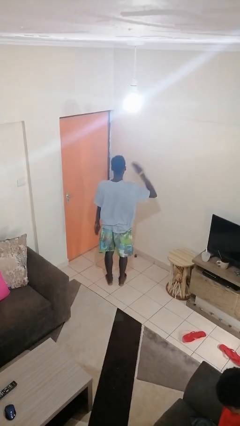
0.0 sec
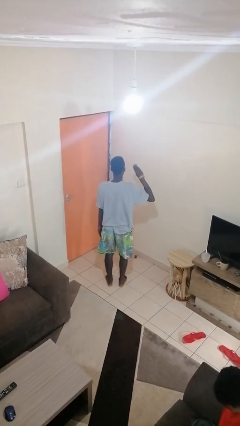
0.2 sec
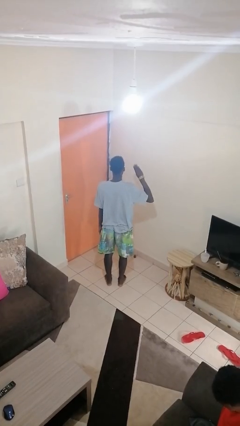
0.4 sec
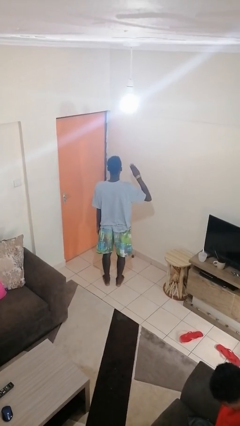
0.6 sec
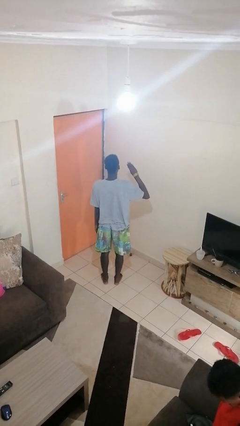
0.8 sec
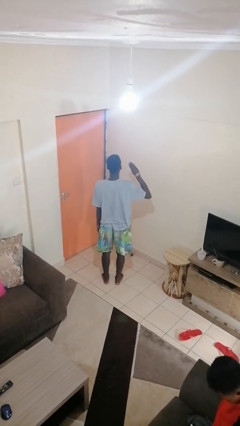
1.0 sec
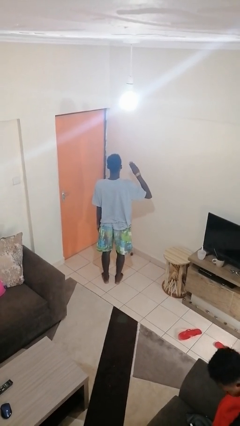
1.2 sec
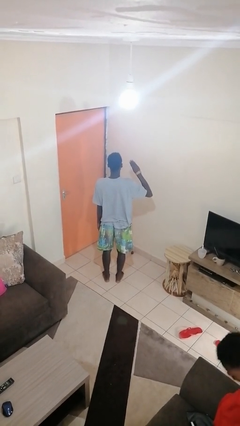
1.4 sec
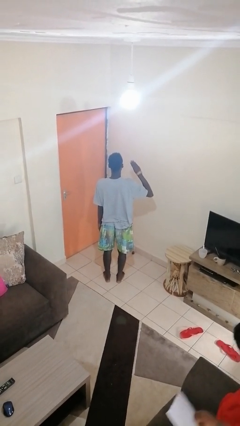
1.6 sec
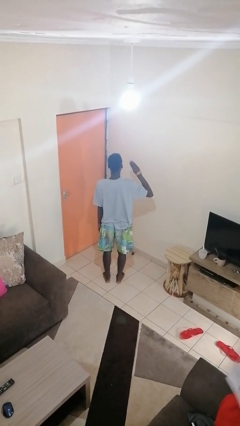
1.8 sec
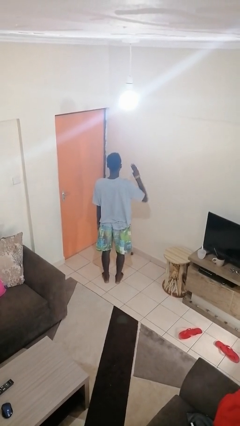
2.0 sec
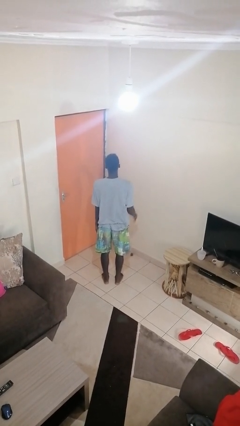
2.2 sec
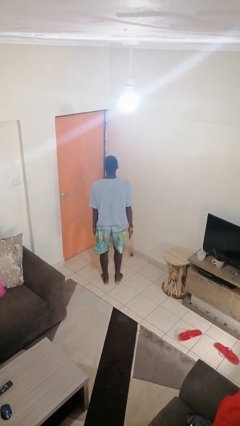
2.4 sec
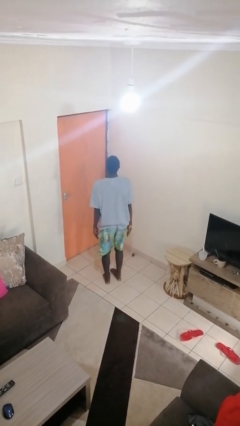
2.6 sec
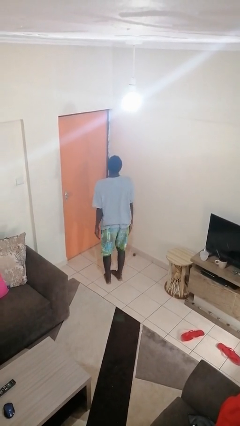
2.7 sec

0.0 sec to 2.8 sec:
person salutes

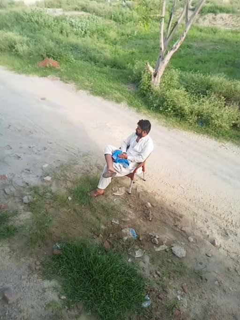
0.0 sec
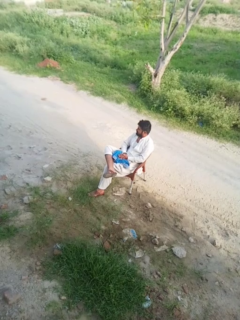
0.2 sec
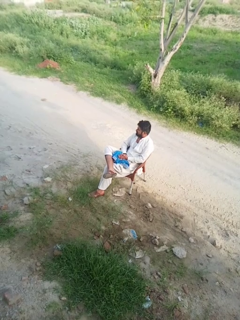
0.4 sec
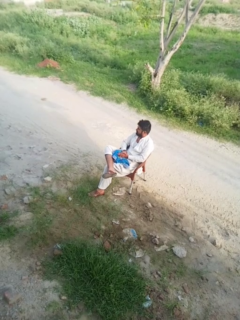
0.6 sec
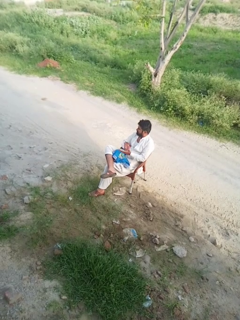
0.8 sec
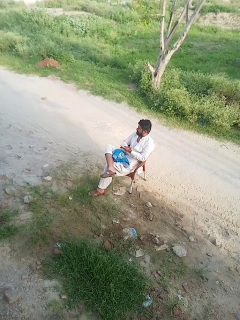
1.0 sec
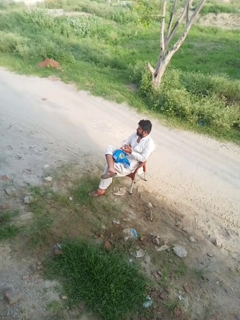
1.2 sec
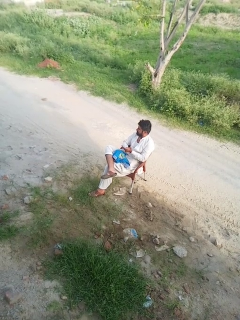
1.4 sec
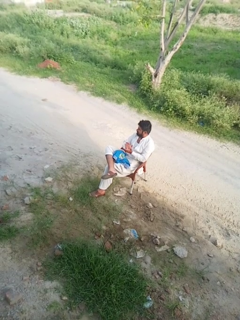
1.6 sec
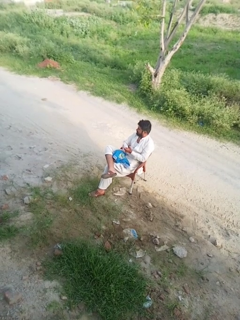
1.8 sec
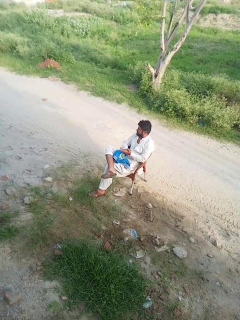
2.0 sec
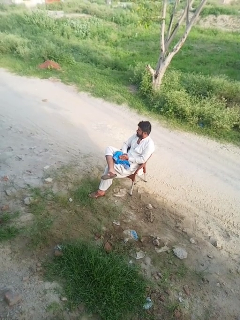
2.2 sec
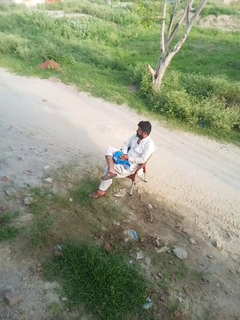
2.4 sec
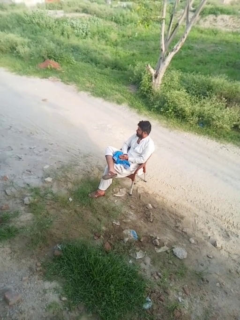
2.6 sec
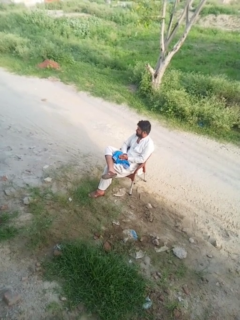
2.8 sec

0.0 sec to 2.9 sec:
person claps hands

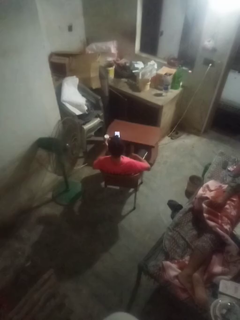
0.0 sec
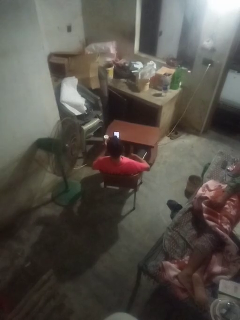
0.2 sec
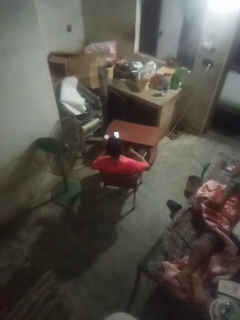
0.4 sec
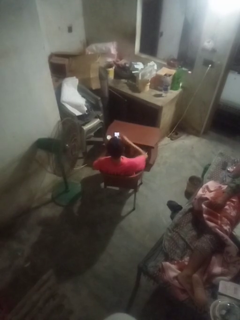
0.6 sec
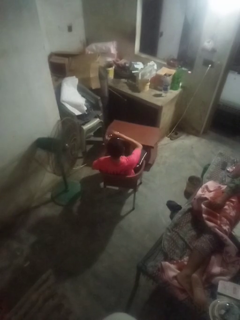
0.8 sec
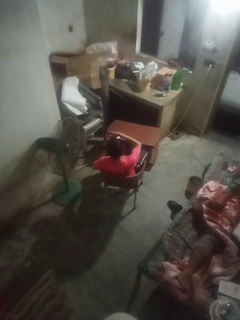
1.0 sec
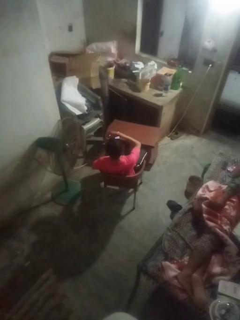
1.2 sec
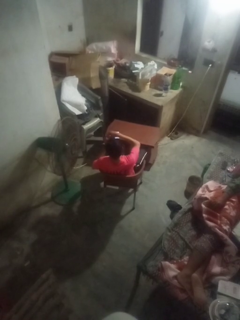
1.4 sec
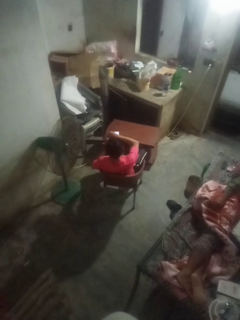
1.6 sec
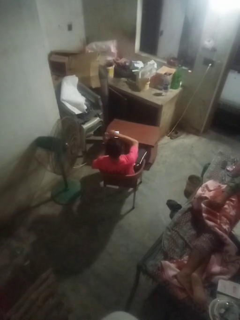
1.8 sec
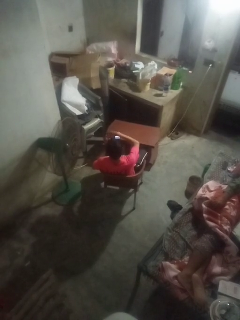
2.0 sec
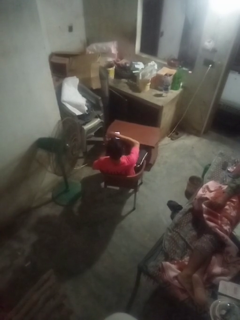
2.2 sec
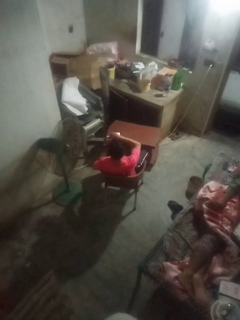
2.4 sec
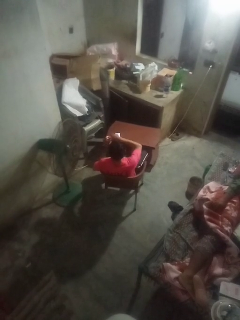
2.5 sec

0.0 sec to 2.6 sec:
person closes jar

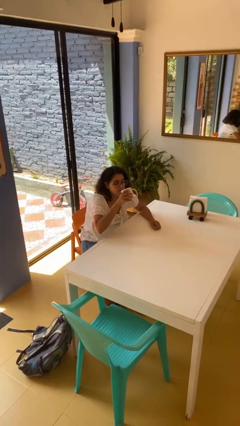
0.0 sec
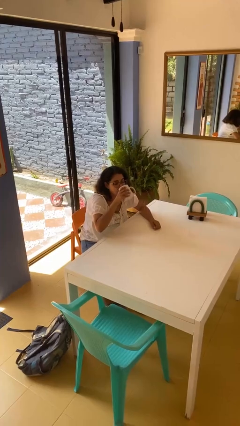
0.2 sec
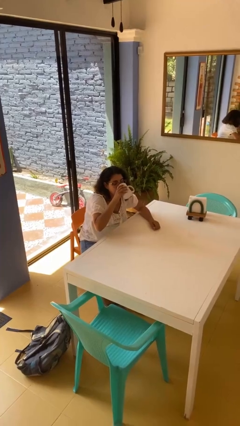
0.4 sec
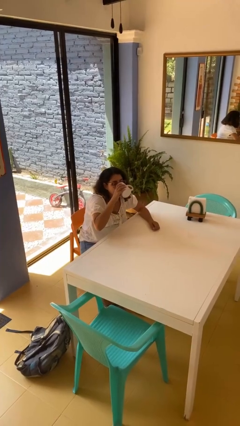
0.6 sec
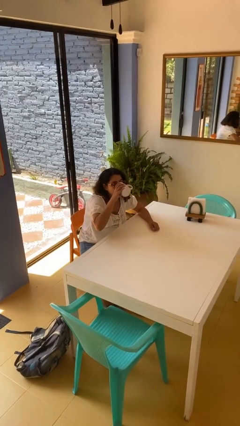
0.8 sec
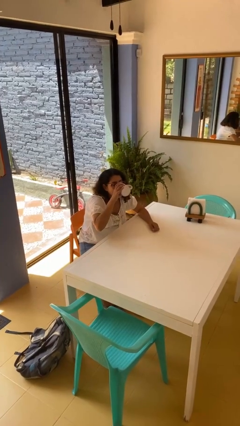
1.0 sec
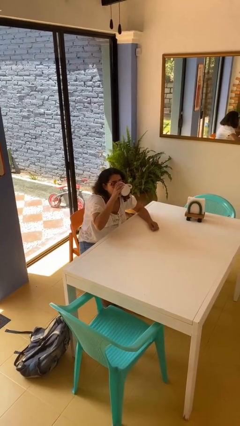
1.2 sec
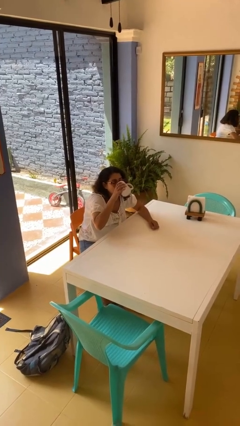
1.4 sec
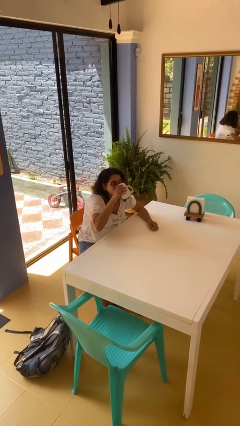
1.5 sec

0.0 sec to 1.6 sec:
person drinks from mug

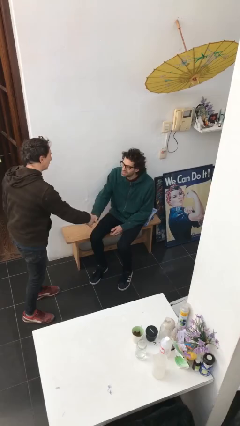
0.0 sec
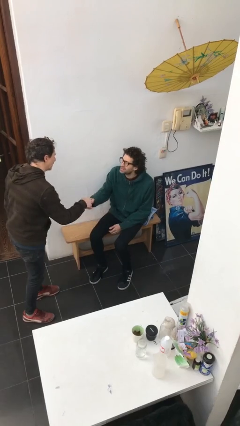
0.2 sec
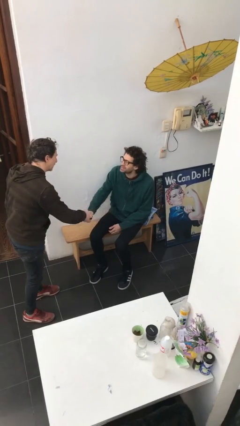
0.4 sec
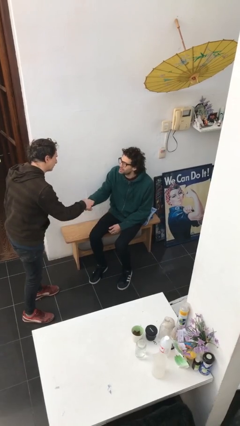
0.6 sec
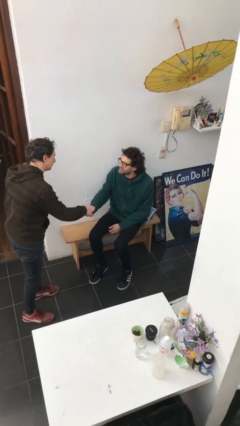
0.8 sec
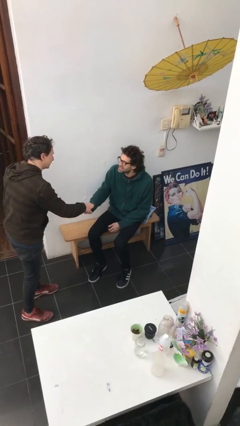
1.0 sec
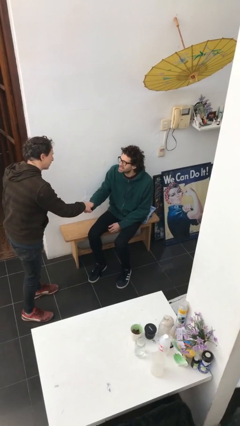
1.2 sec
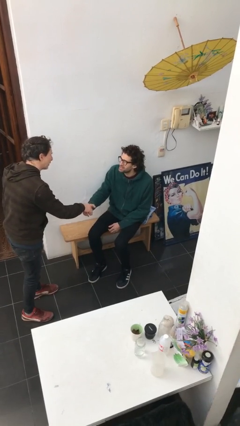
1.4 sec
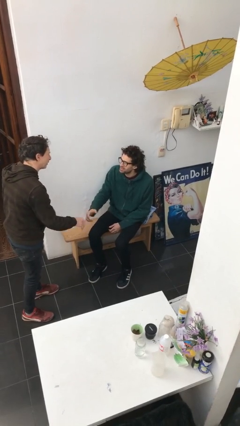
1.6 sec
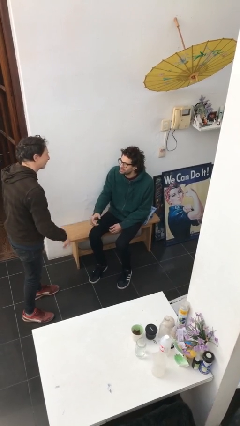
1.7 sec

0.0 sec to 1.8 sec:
person shakes hand

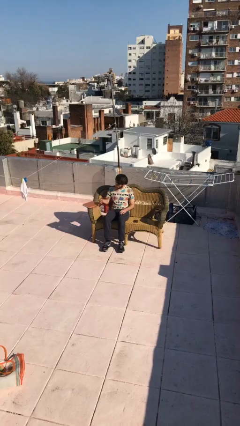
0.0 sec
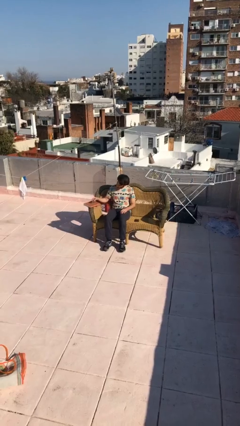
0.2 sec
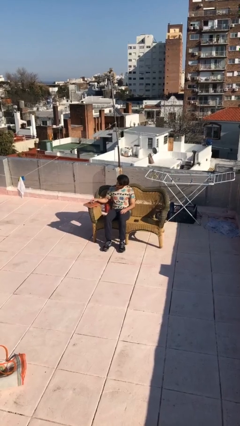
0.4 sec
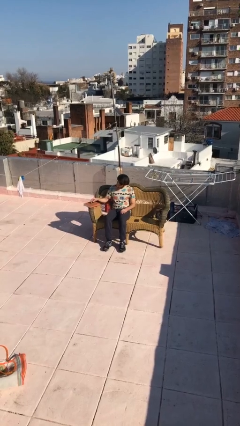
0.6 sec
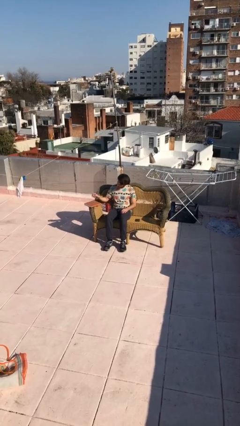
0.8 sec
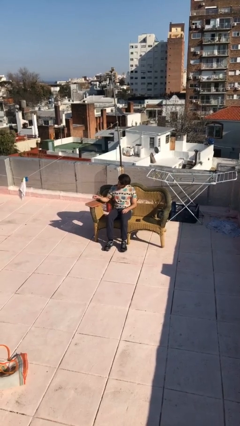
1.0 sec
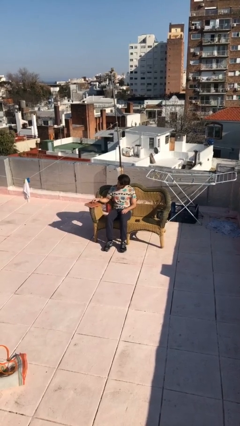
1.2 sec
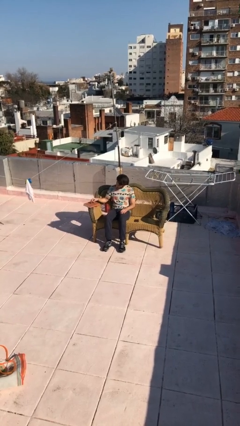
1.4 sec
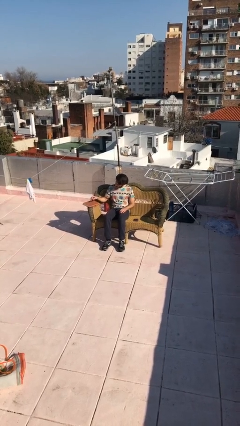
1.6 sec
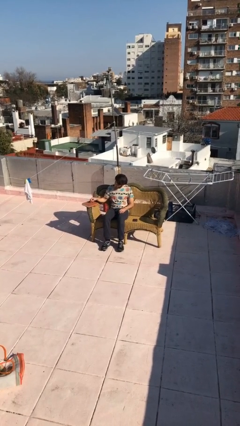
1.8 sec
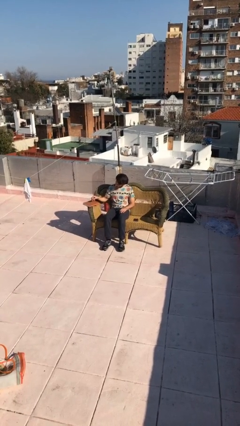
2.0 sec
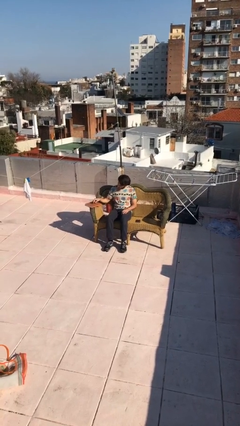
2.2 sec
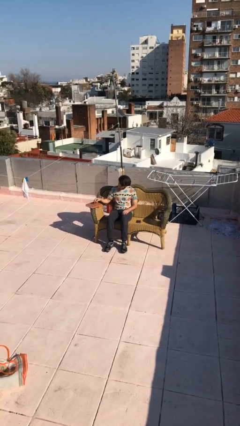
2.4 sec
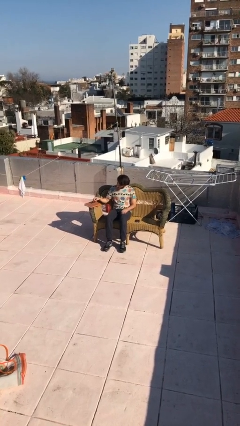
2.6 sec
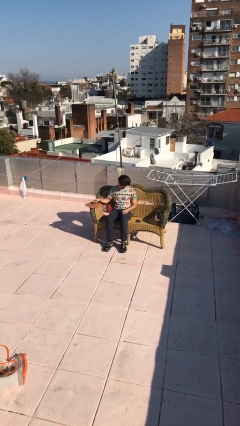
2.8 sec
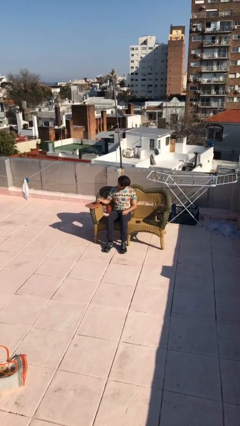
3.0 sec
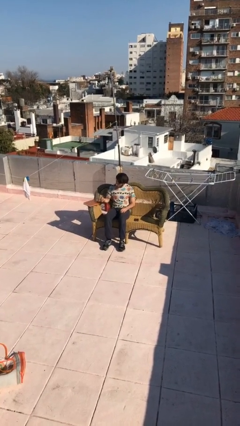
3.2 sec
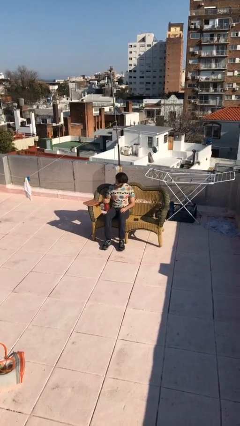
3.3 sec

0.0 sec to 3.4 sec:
person taps object with finger

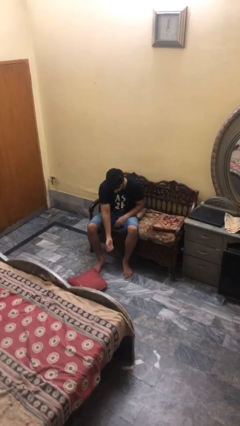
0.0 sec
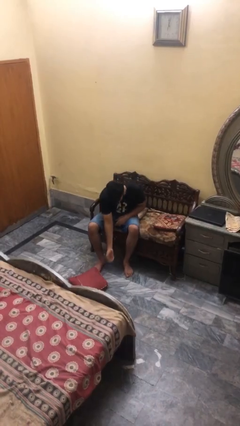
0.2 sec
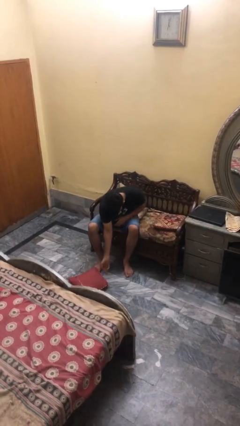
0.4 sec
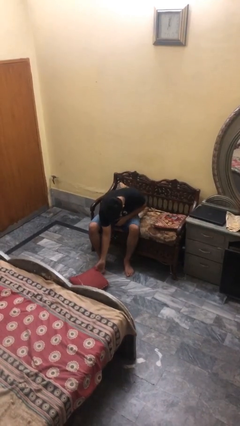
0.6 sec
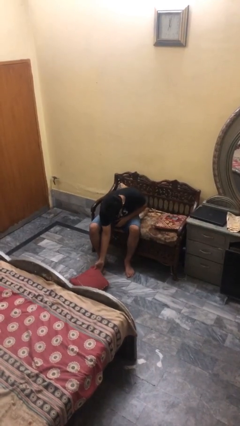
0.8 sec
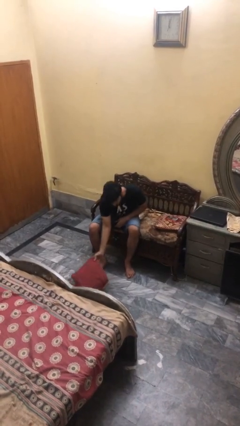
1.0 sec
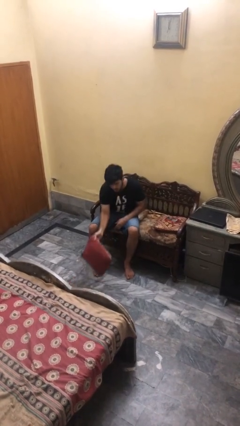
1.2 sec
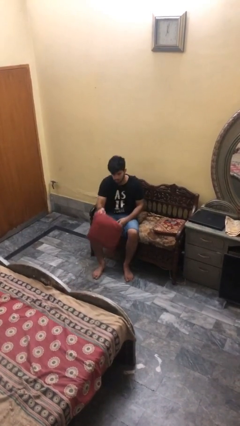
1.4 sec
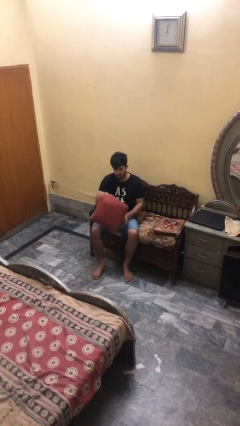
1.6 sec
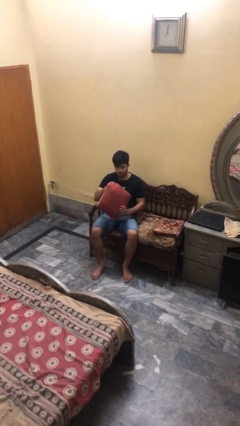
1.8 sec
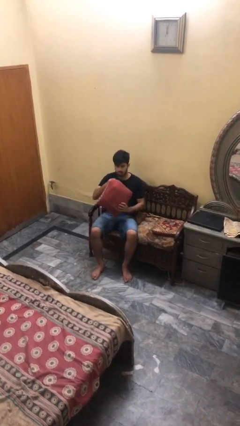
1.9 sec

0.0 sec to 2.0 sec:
person picks up object from floor

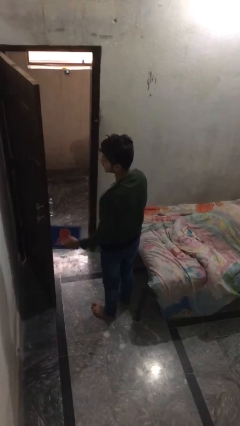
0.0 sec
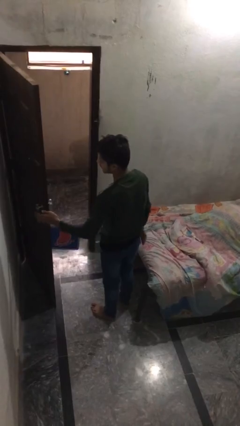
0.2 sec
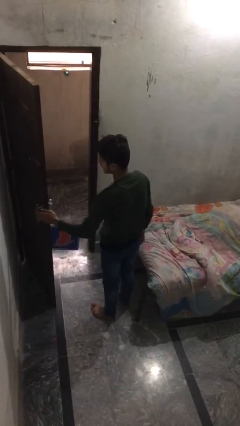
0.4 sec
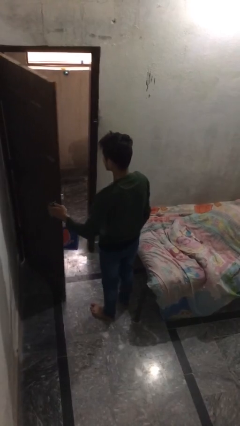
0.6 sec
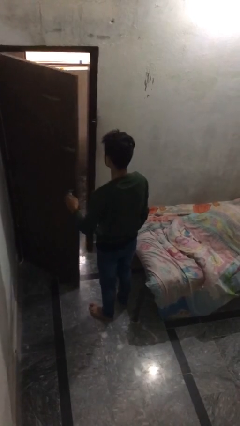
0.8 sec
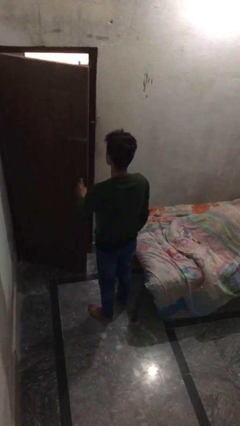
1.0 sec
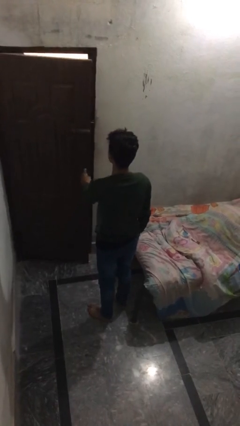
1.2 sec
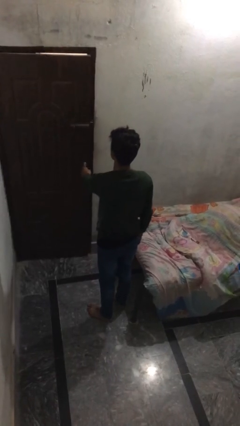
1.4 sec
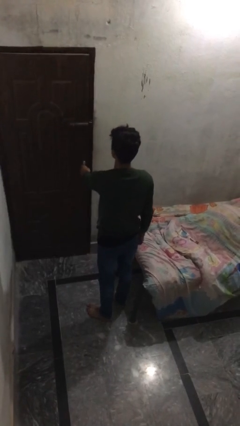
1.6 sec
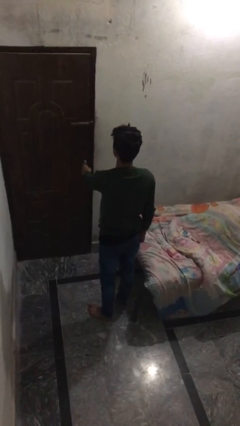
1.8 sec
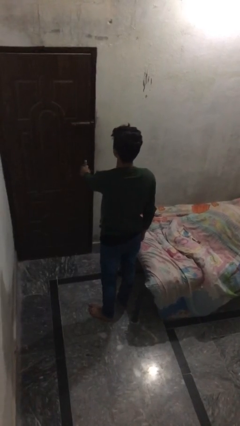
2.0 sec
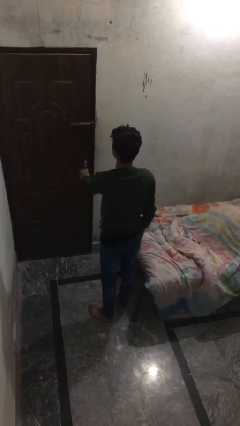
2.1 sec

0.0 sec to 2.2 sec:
person closes facility door
